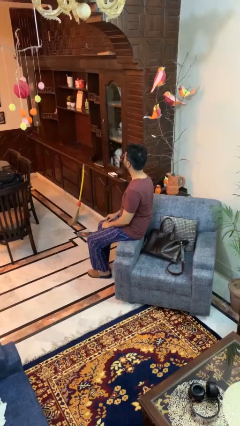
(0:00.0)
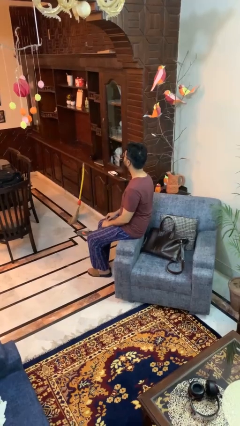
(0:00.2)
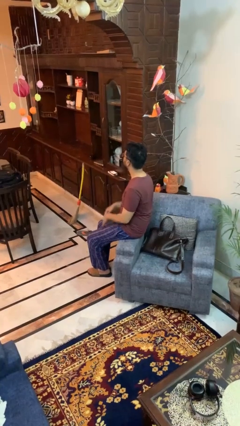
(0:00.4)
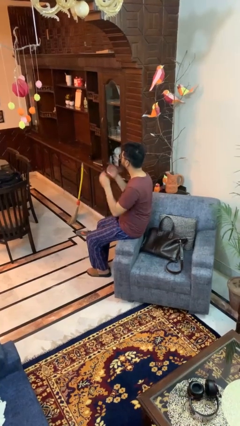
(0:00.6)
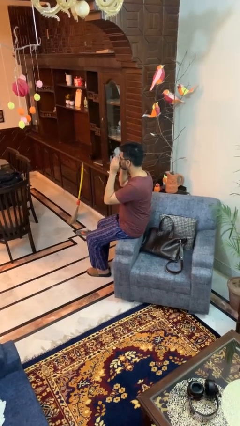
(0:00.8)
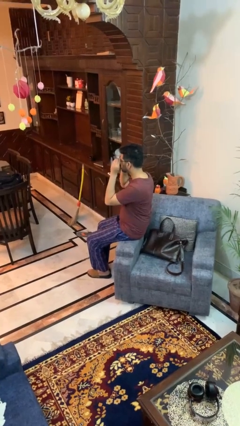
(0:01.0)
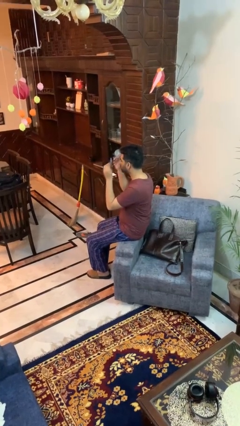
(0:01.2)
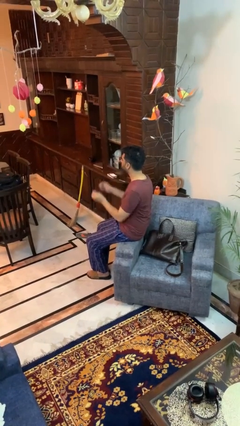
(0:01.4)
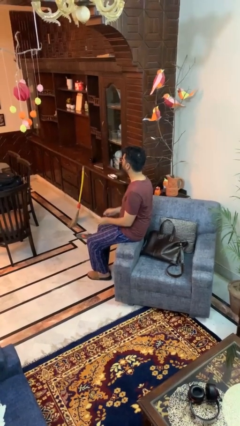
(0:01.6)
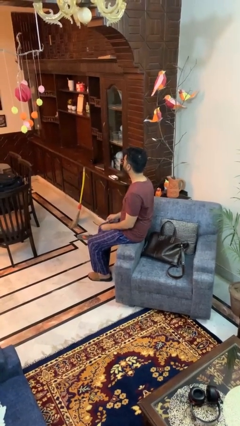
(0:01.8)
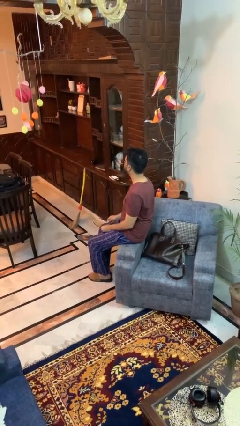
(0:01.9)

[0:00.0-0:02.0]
person takes off glasses

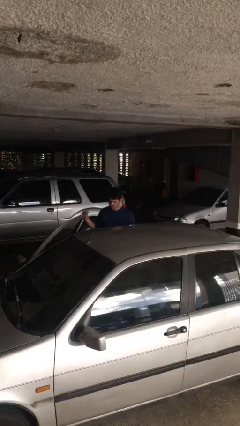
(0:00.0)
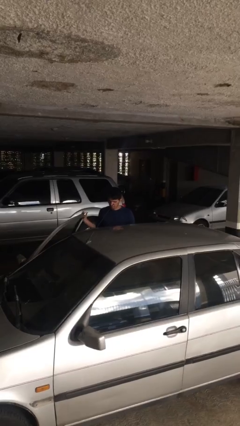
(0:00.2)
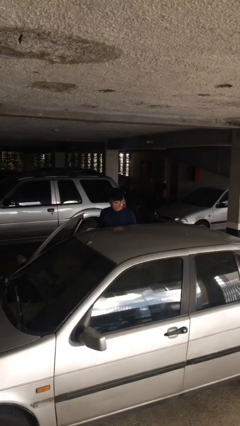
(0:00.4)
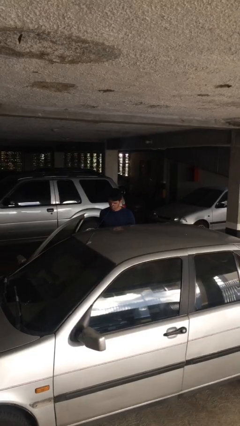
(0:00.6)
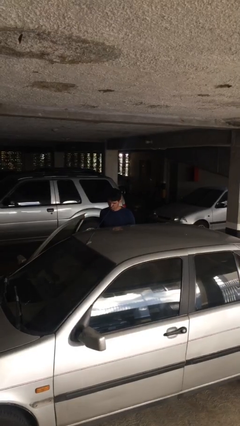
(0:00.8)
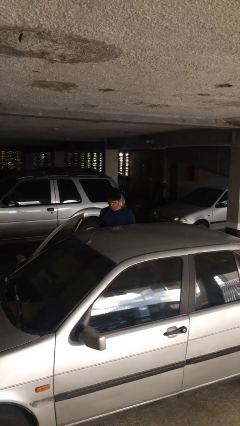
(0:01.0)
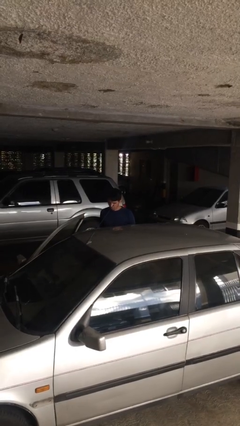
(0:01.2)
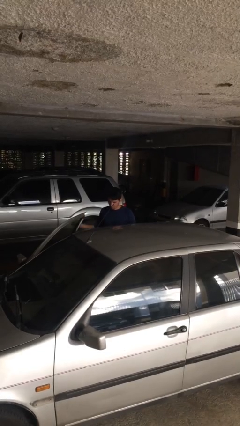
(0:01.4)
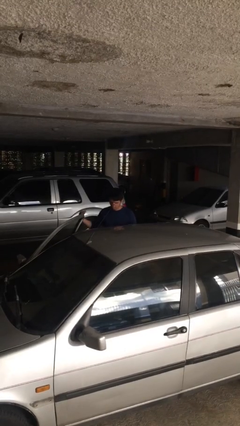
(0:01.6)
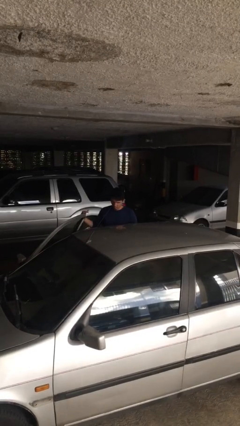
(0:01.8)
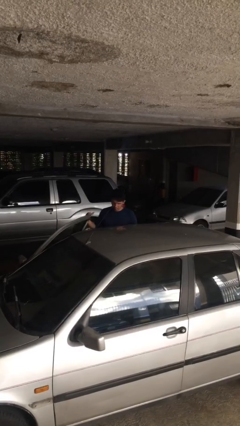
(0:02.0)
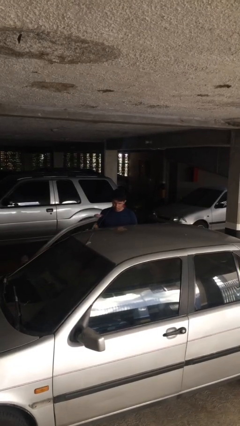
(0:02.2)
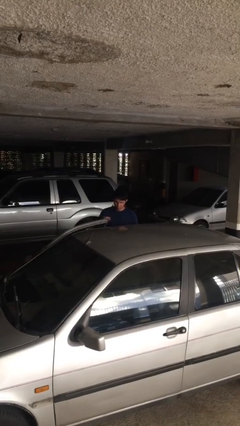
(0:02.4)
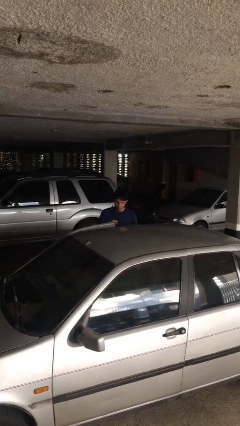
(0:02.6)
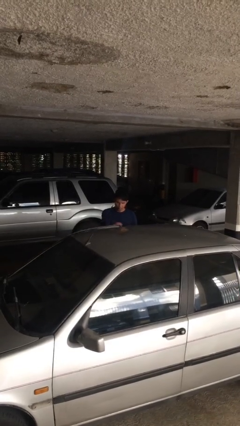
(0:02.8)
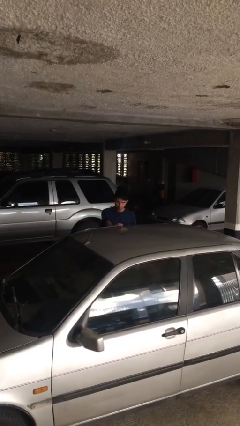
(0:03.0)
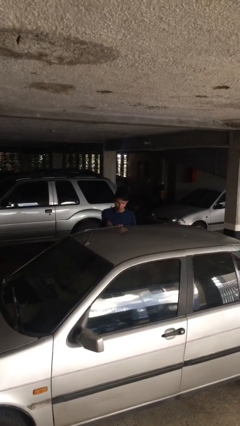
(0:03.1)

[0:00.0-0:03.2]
person closes car door

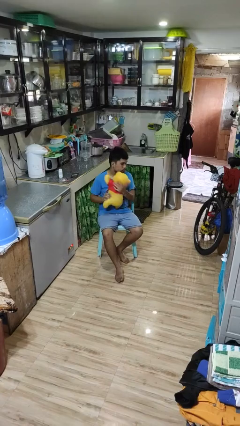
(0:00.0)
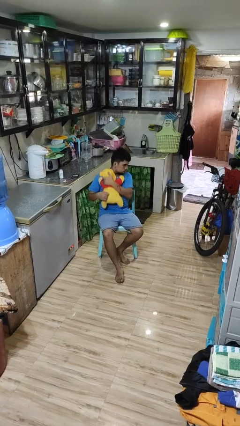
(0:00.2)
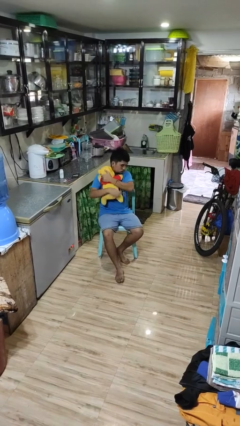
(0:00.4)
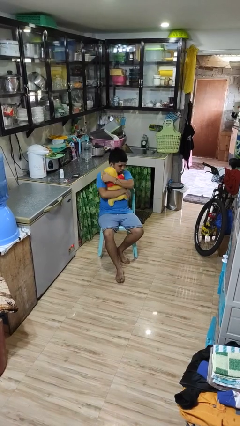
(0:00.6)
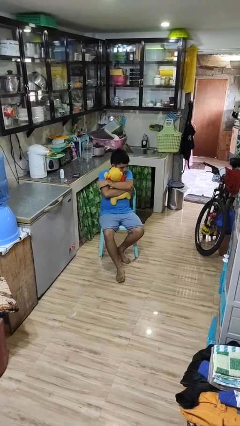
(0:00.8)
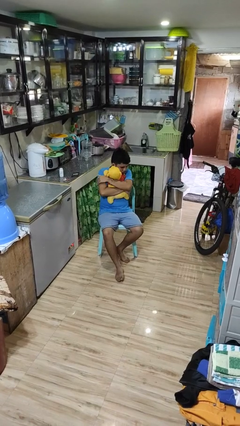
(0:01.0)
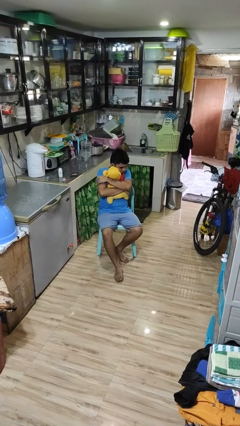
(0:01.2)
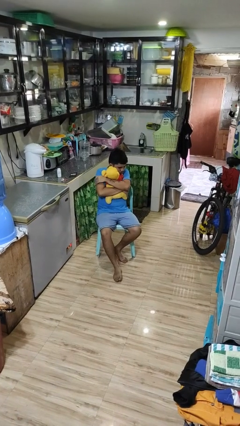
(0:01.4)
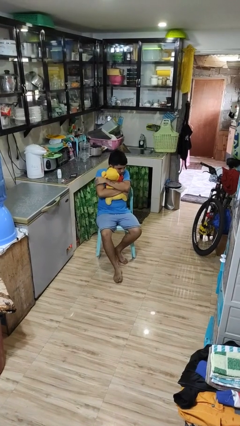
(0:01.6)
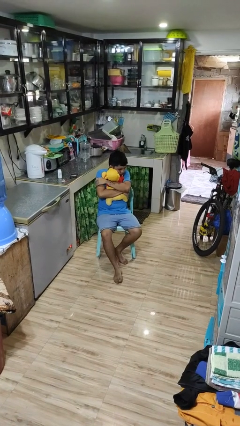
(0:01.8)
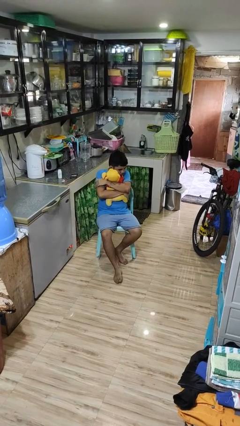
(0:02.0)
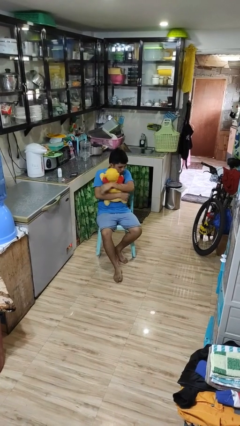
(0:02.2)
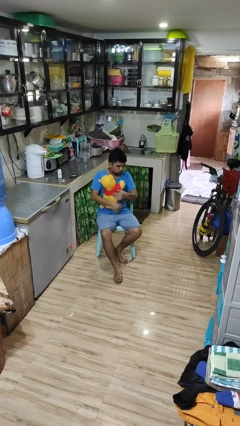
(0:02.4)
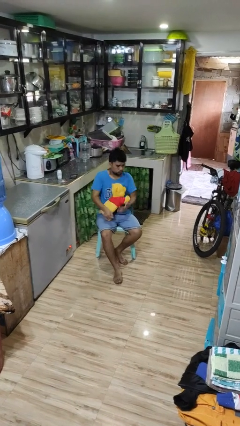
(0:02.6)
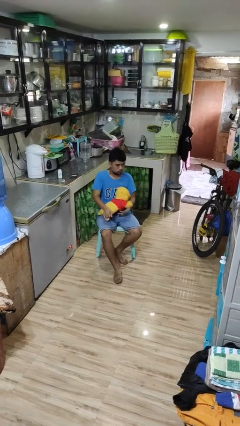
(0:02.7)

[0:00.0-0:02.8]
person hugs stuffed animal

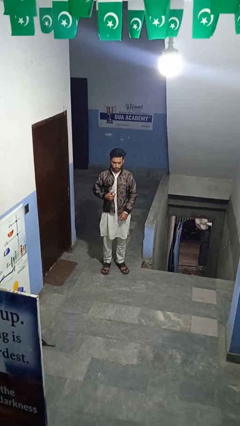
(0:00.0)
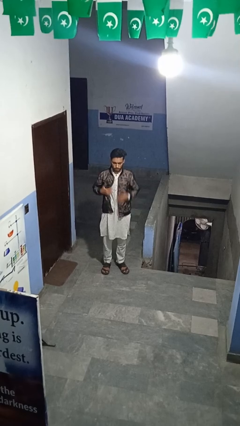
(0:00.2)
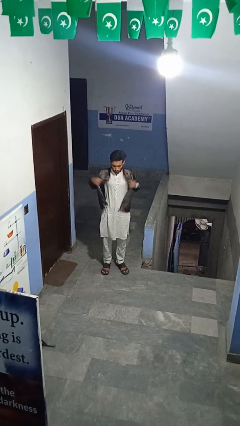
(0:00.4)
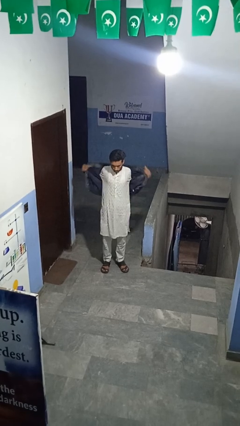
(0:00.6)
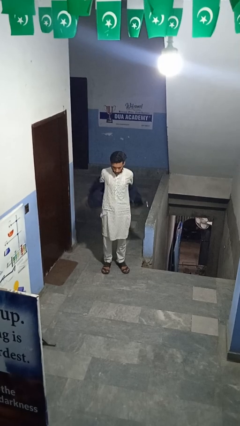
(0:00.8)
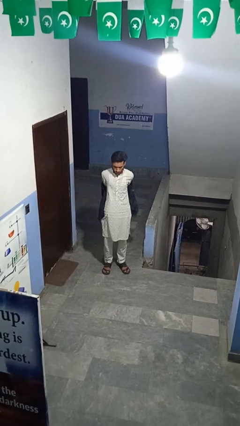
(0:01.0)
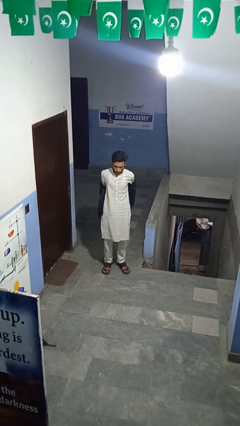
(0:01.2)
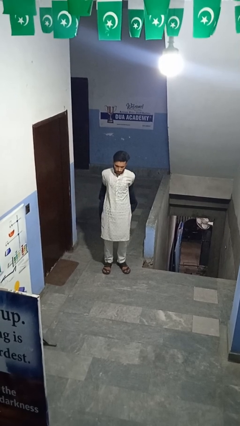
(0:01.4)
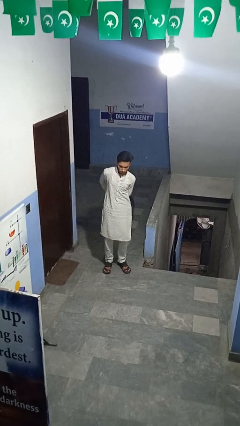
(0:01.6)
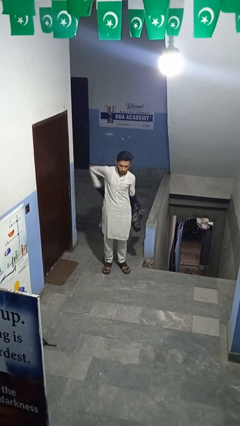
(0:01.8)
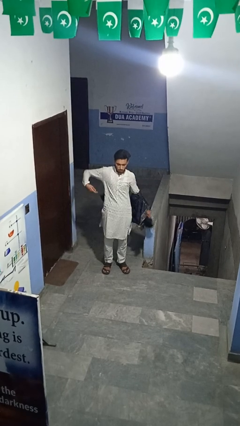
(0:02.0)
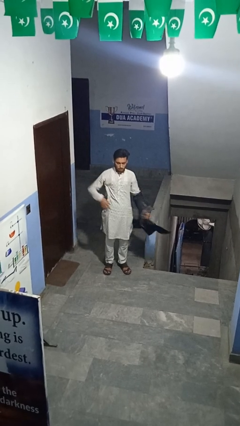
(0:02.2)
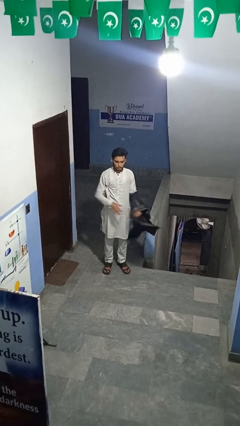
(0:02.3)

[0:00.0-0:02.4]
person takes off jacket

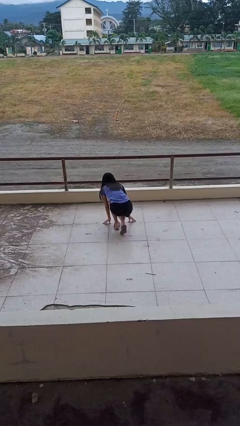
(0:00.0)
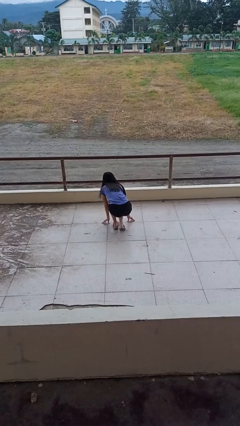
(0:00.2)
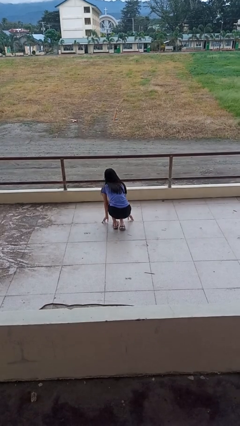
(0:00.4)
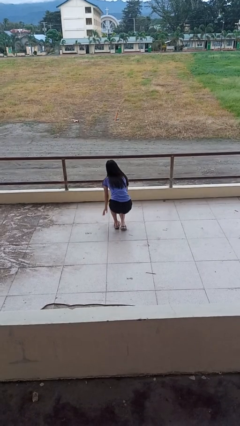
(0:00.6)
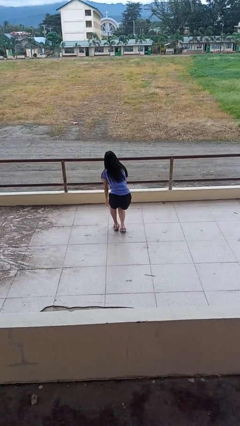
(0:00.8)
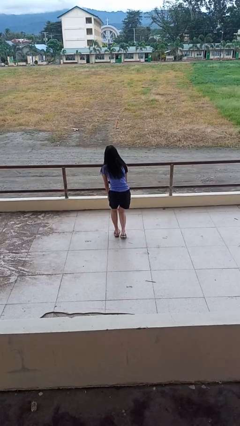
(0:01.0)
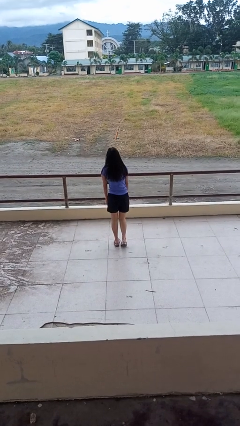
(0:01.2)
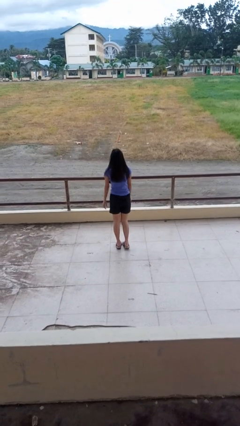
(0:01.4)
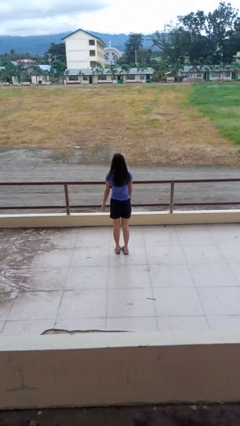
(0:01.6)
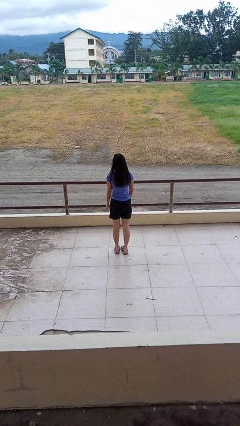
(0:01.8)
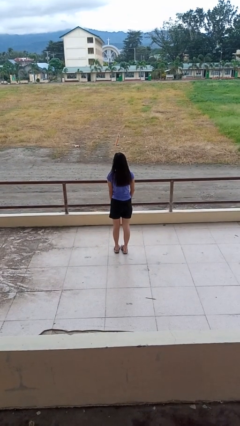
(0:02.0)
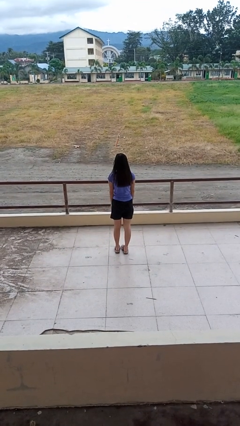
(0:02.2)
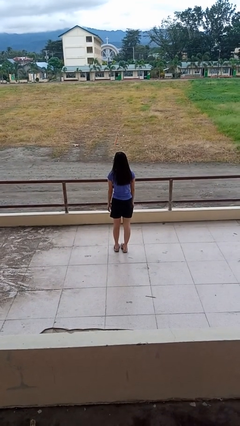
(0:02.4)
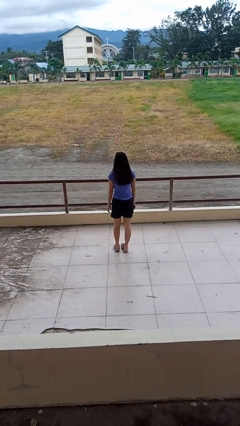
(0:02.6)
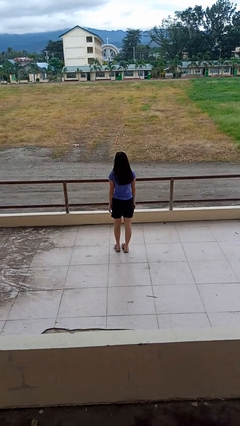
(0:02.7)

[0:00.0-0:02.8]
person stands up from floor

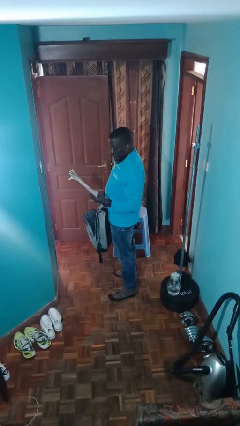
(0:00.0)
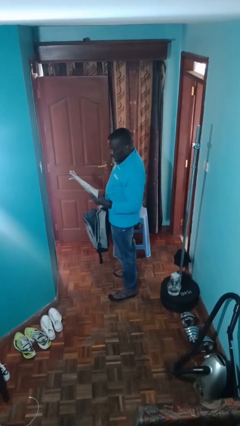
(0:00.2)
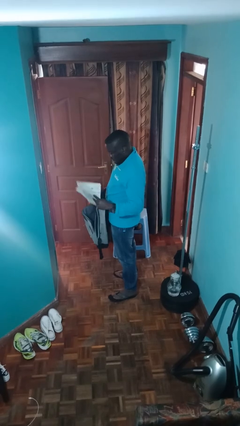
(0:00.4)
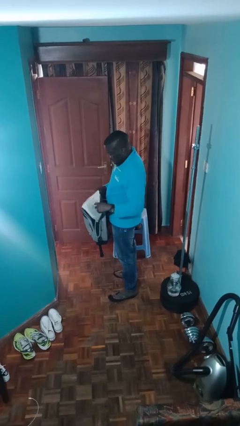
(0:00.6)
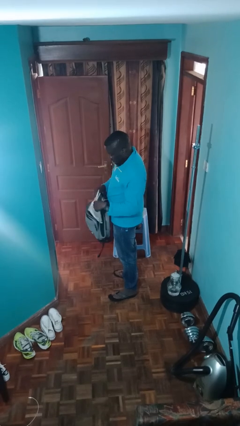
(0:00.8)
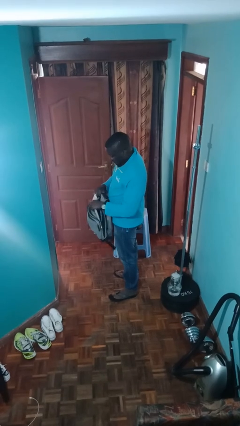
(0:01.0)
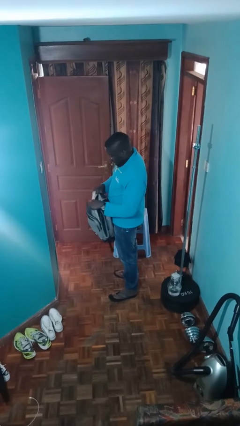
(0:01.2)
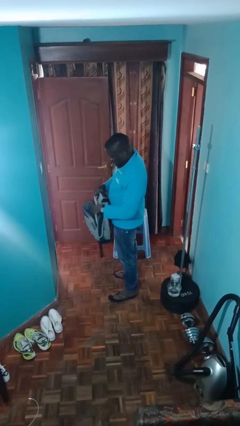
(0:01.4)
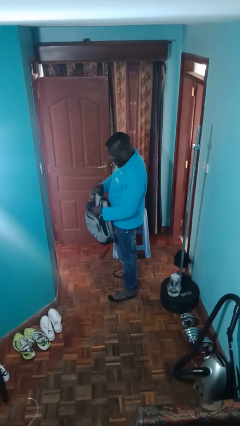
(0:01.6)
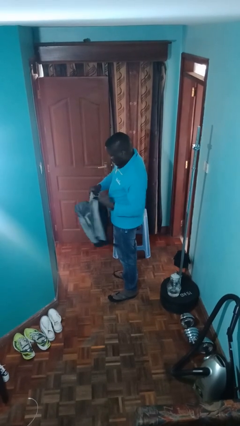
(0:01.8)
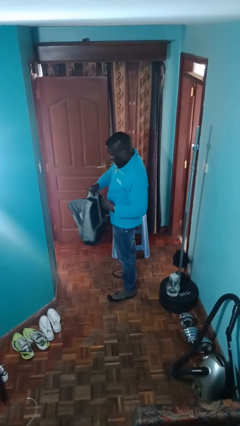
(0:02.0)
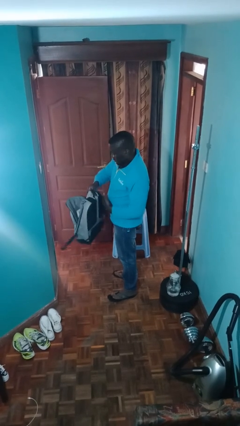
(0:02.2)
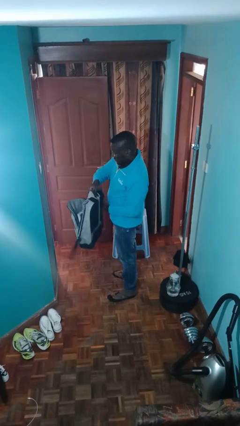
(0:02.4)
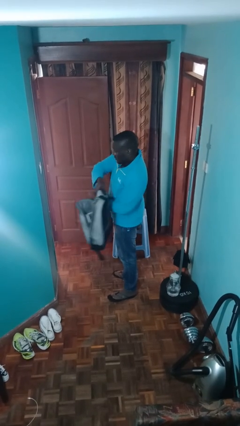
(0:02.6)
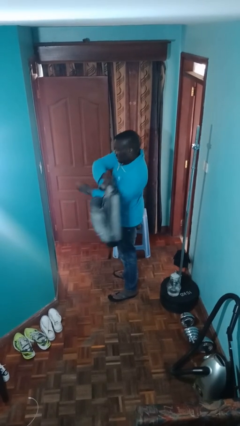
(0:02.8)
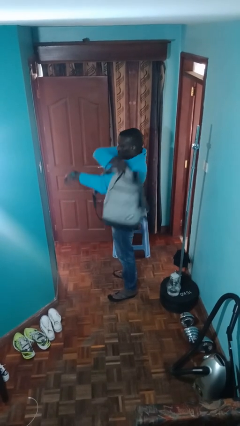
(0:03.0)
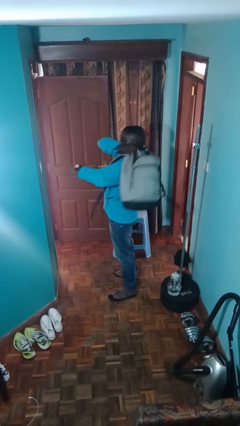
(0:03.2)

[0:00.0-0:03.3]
person puts object into backpack

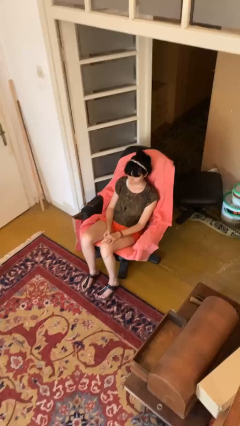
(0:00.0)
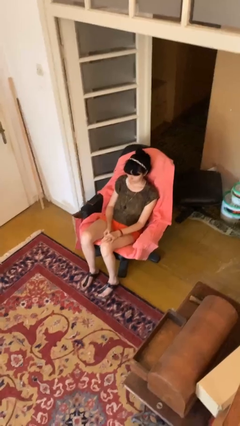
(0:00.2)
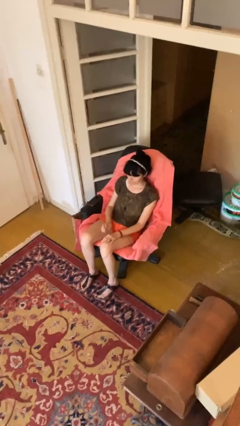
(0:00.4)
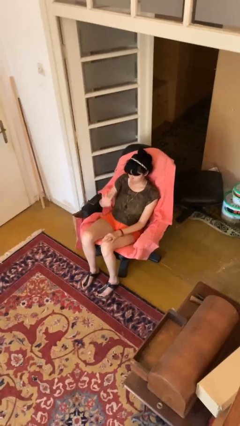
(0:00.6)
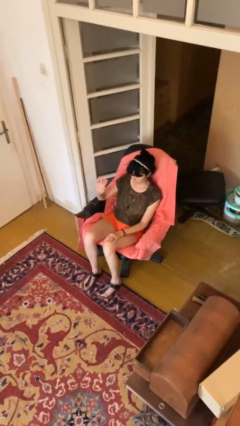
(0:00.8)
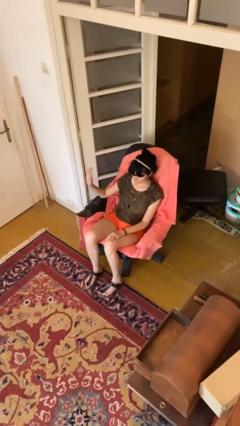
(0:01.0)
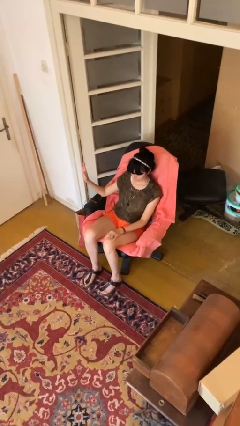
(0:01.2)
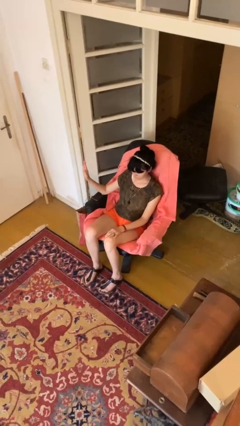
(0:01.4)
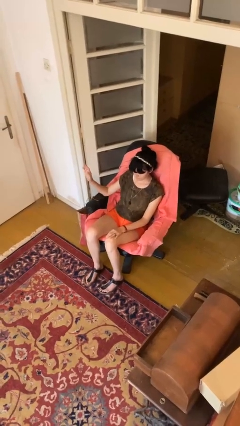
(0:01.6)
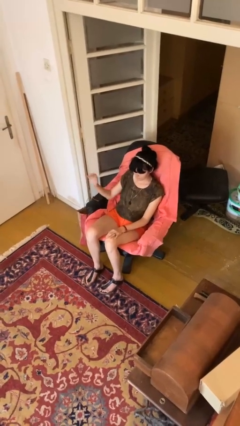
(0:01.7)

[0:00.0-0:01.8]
person gestures swipe right
